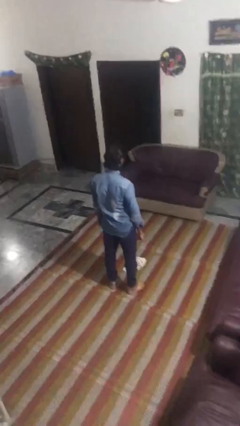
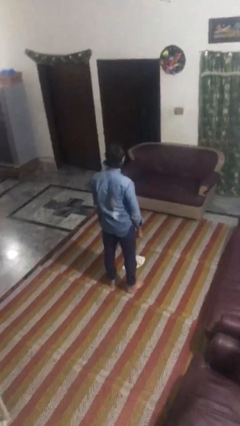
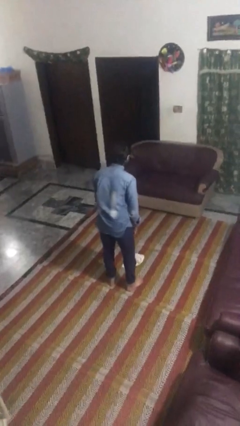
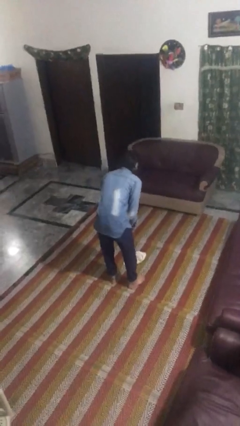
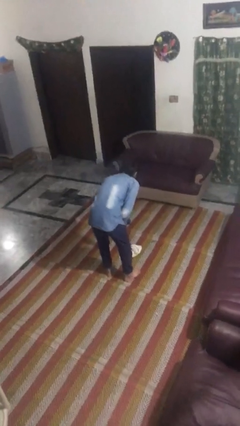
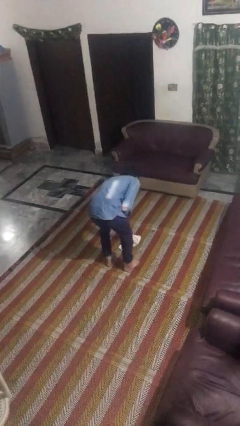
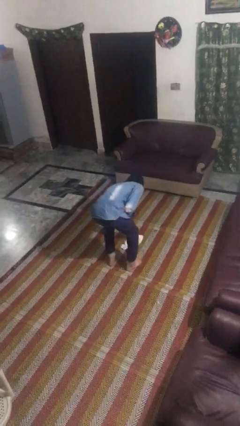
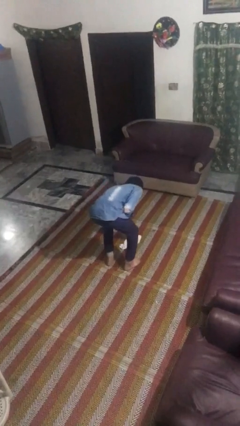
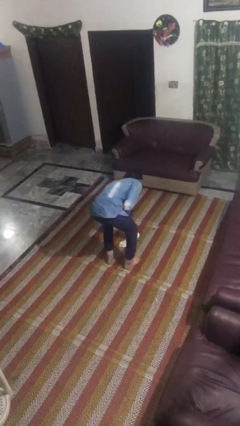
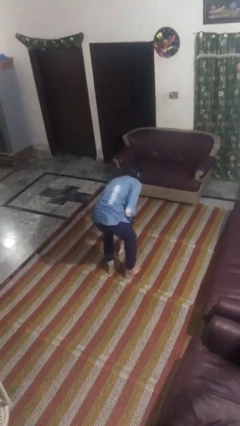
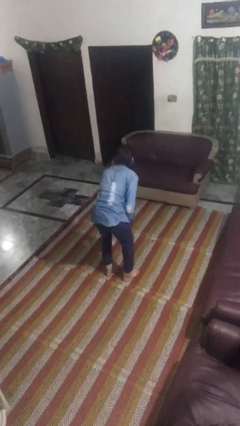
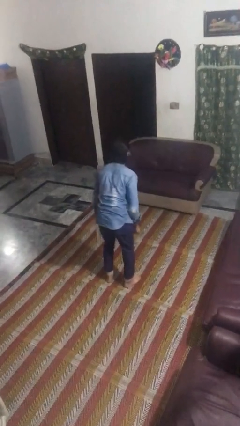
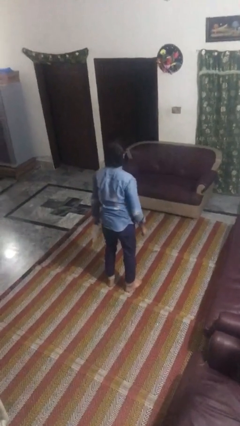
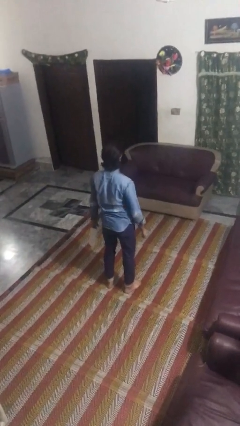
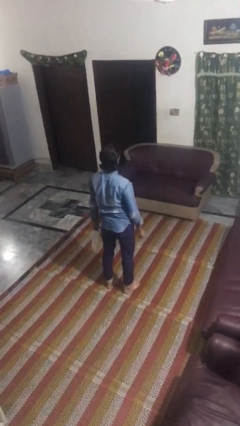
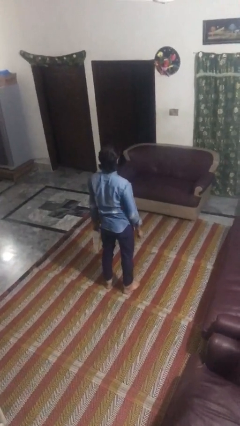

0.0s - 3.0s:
person picks up object from floor

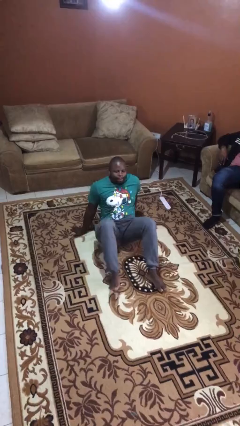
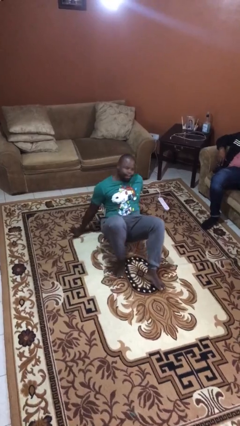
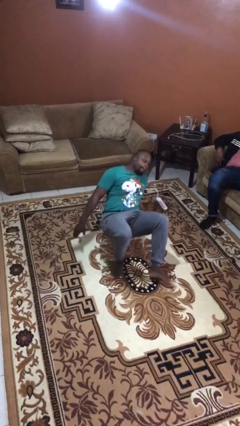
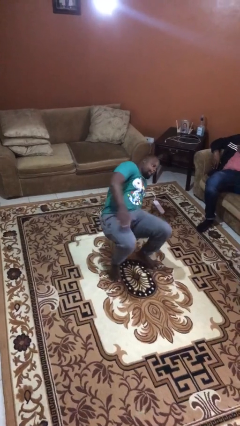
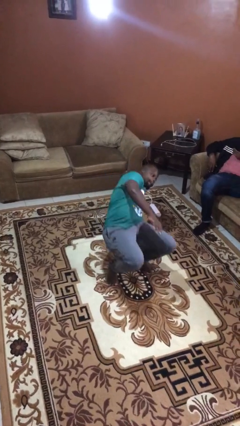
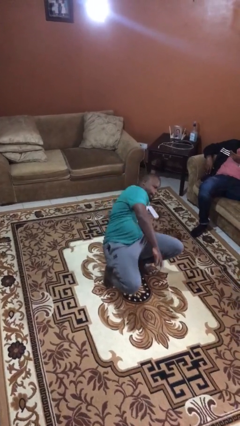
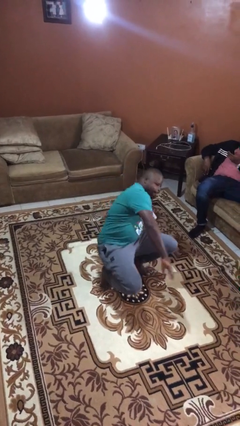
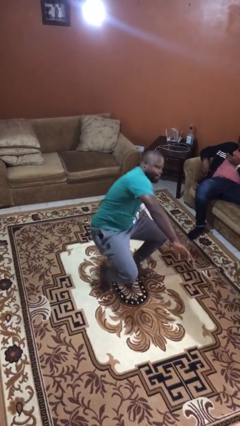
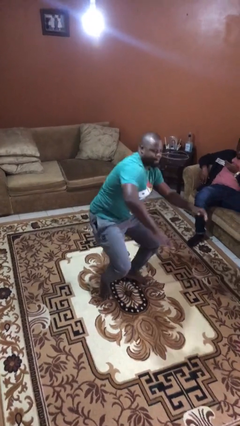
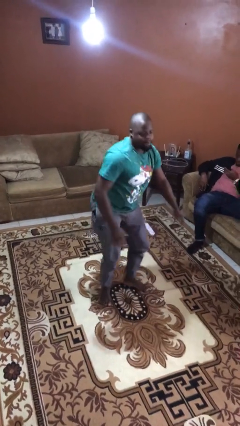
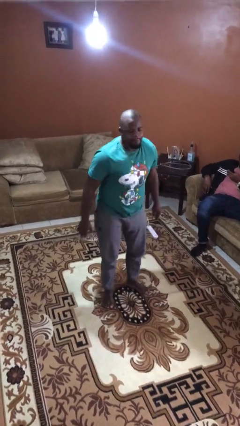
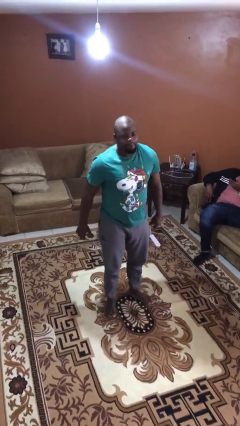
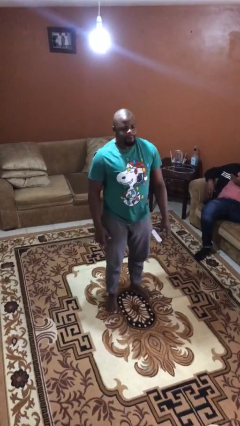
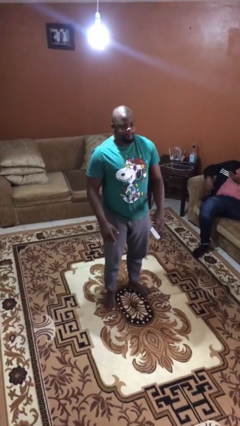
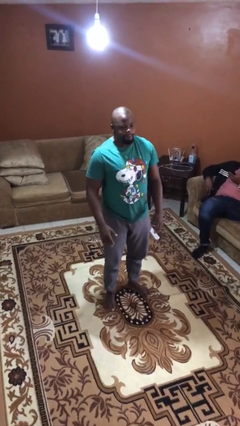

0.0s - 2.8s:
person stands up

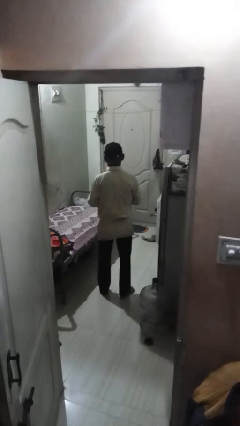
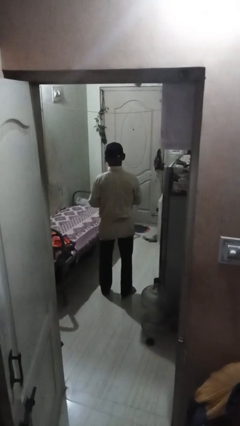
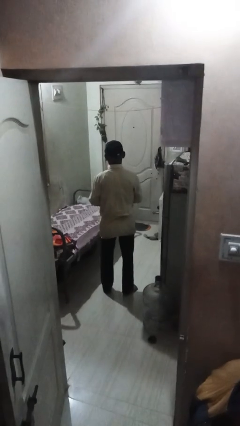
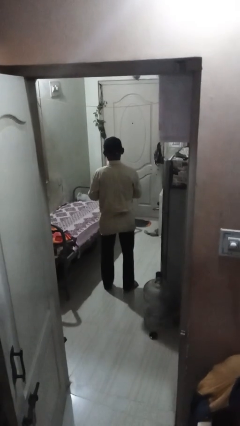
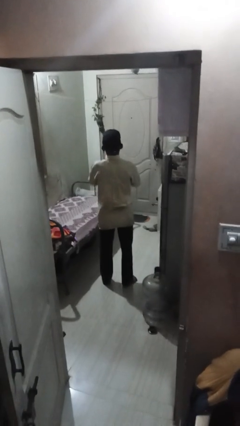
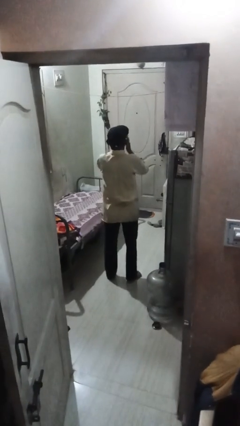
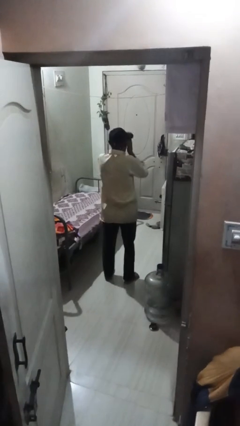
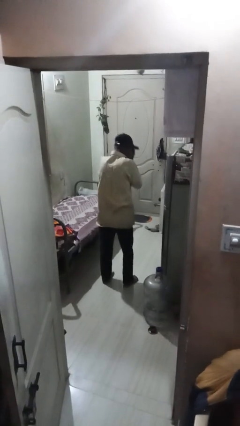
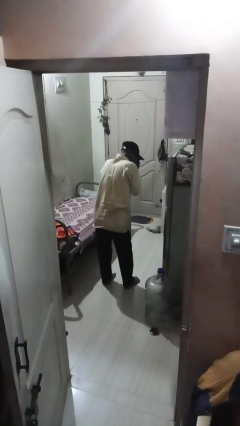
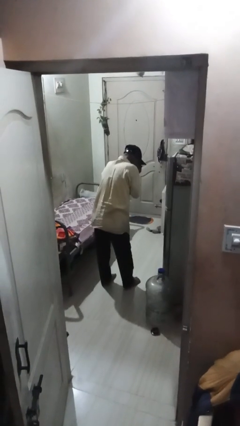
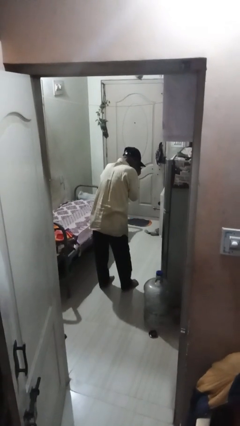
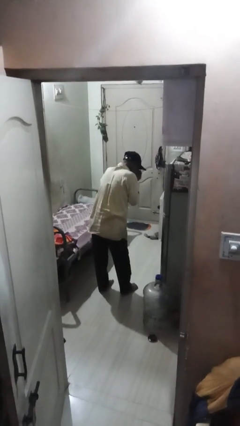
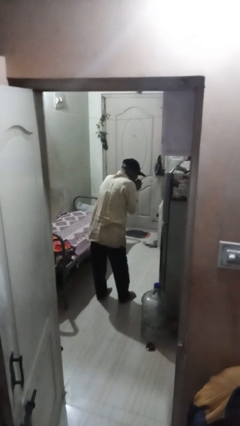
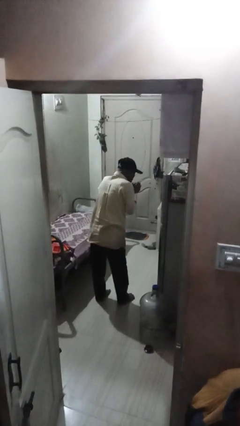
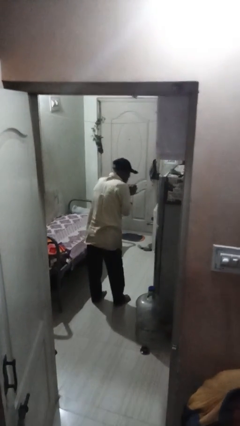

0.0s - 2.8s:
person sneezes into hand

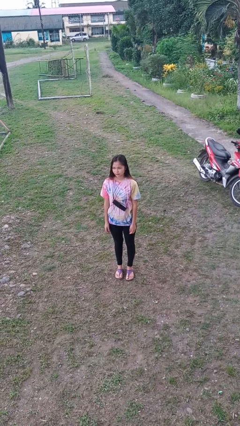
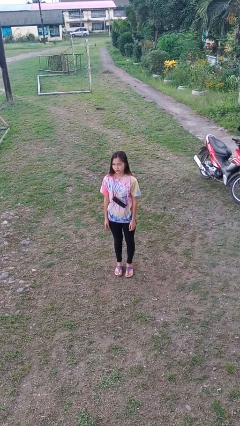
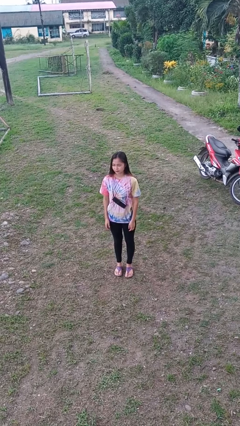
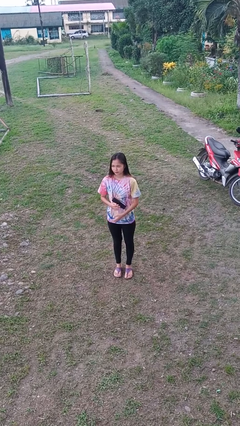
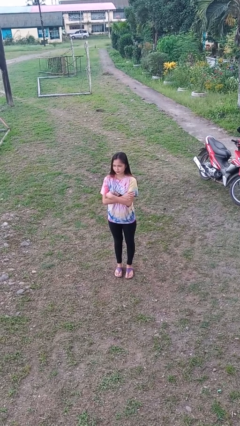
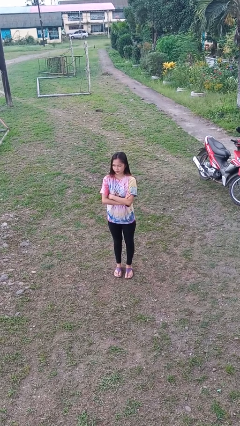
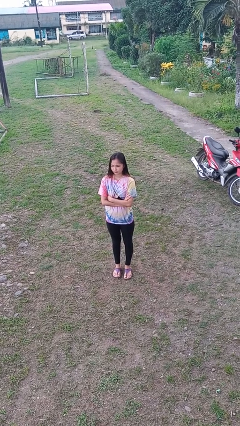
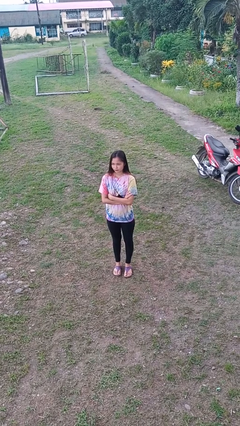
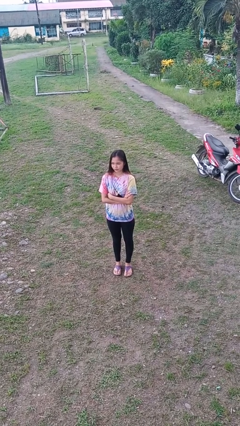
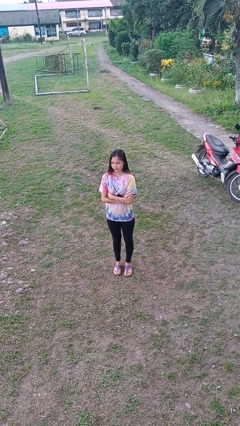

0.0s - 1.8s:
person crosses arms

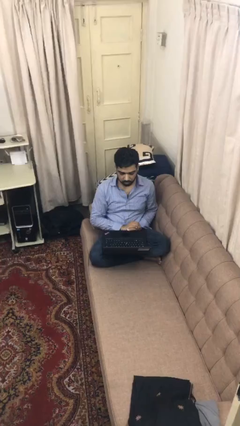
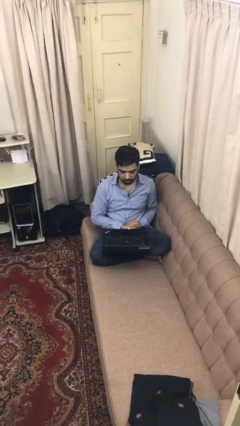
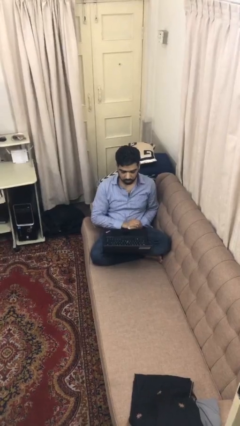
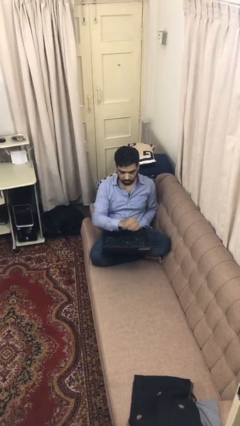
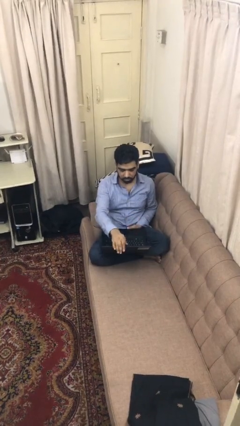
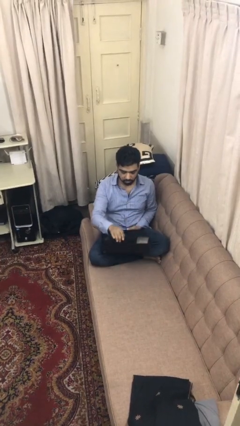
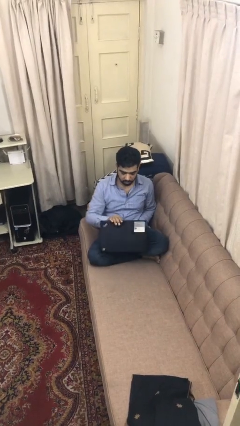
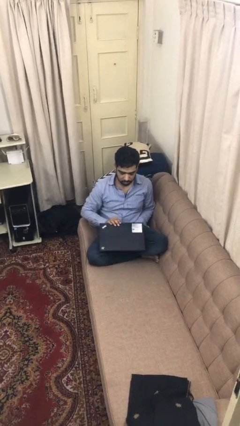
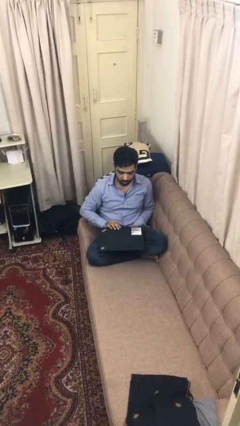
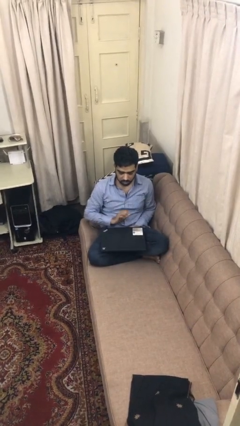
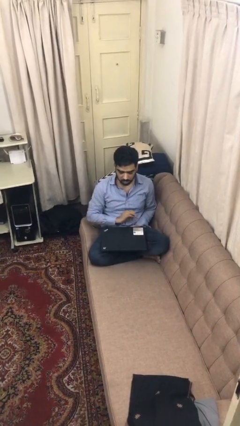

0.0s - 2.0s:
person closes laptop

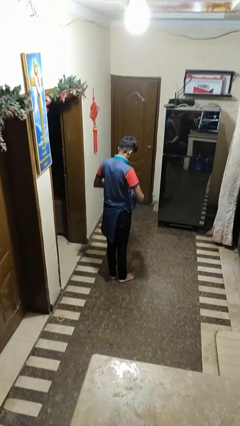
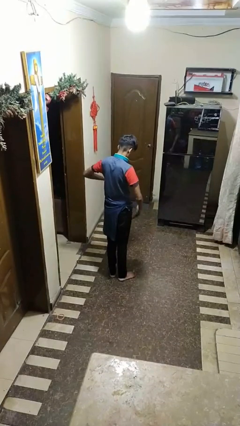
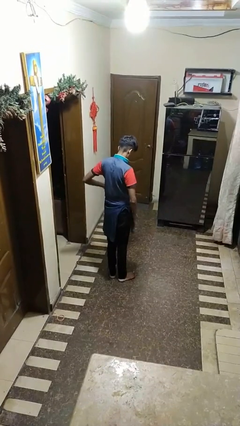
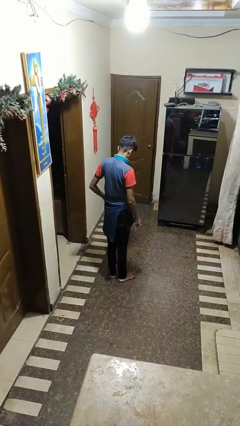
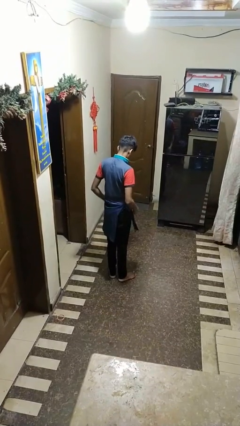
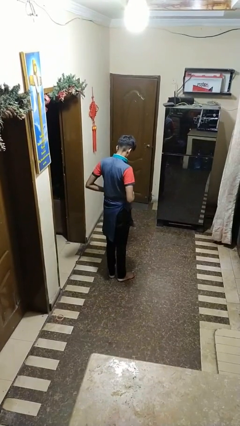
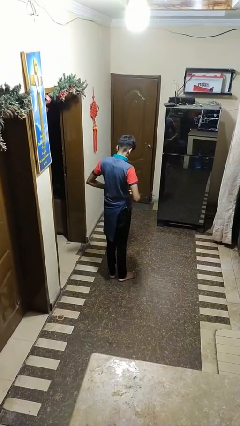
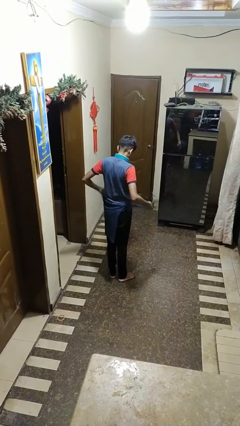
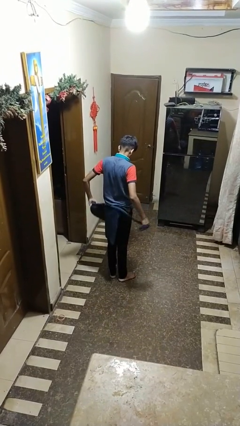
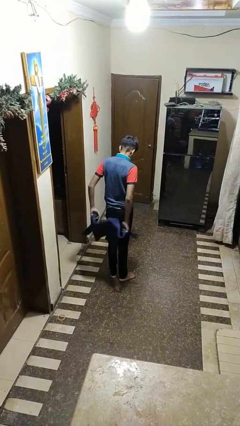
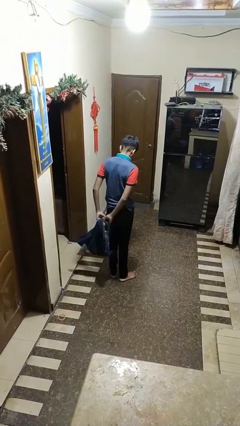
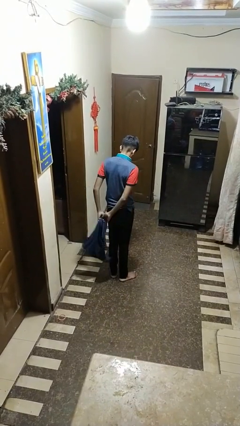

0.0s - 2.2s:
person unties jacket around waist

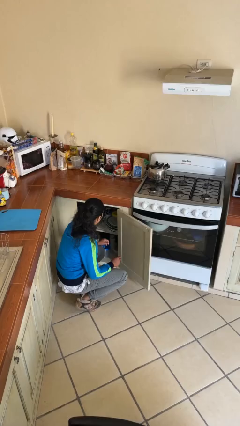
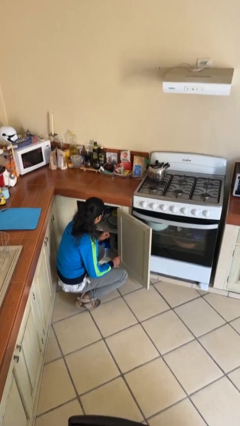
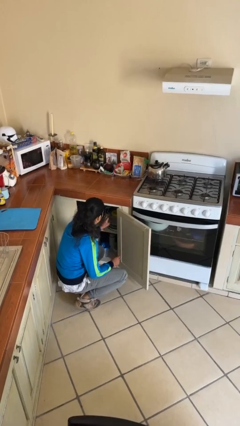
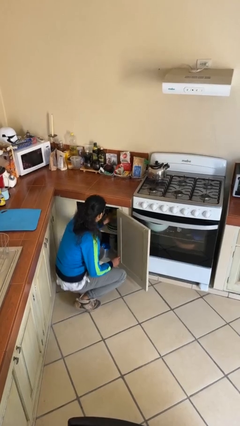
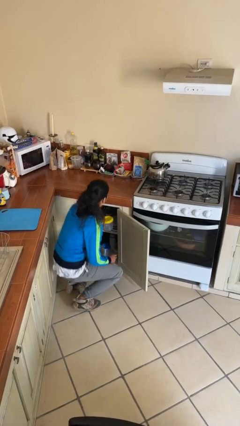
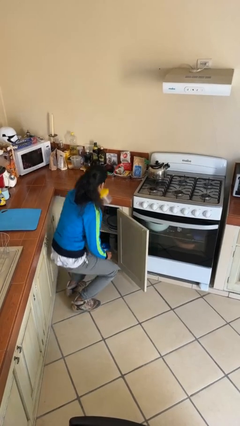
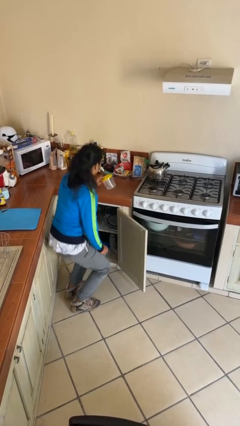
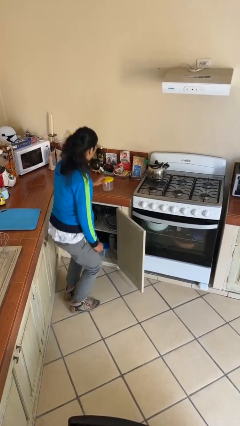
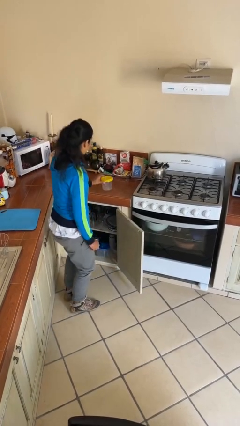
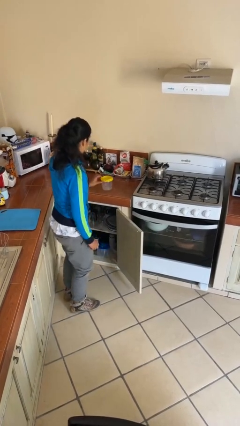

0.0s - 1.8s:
person takes object from cabinet

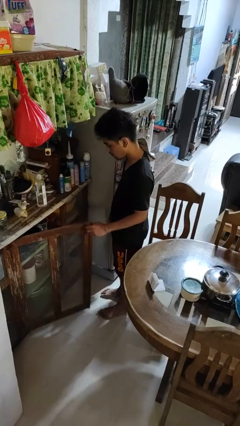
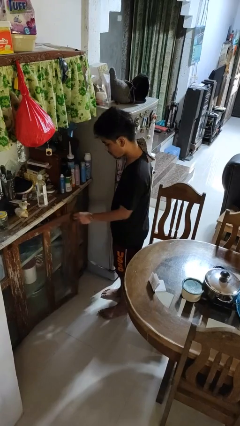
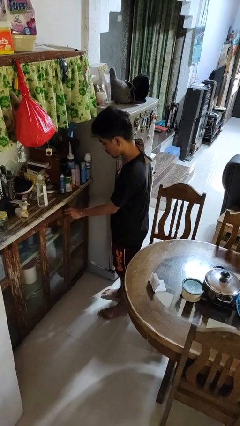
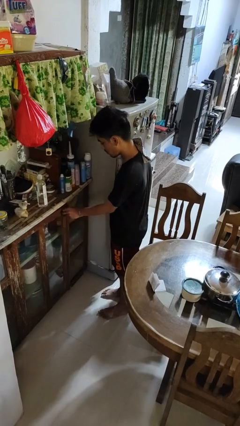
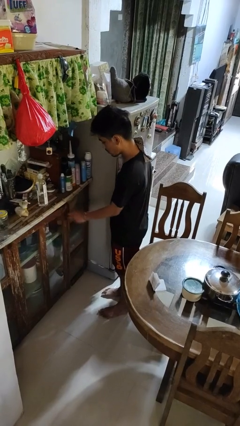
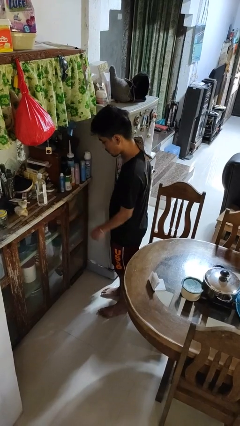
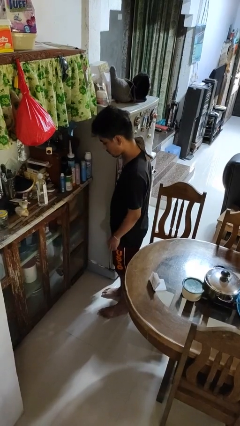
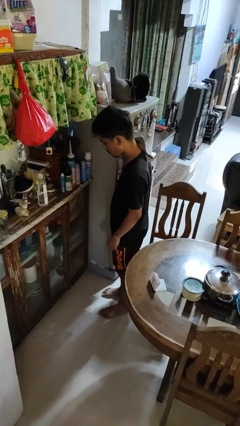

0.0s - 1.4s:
person closes cabinet
